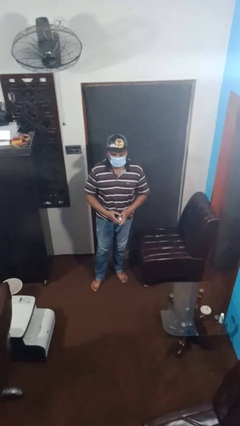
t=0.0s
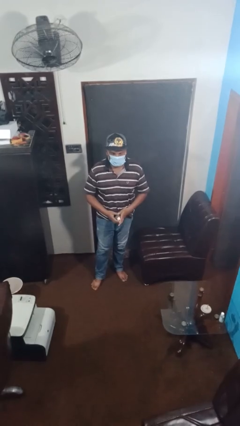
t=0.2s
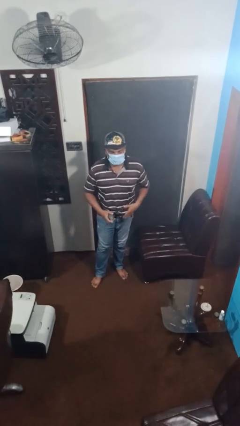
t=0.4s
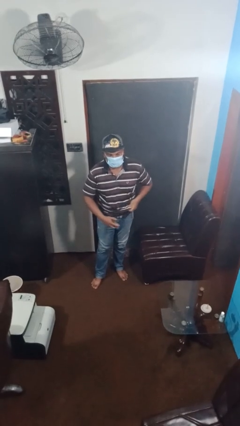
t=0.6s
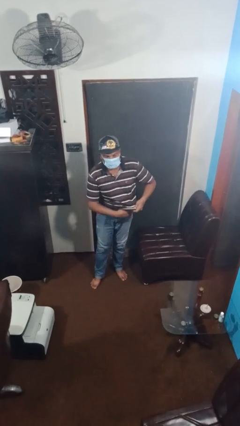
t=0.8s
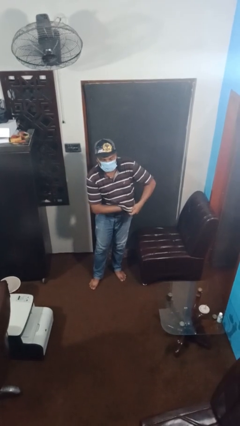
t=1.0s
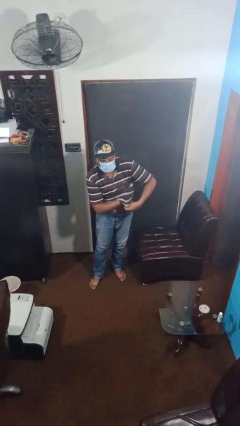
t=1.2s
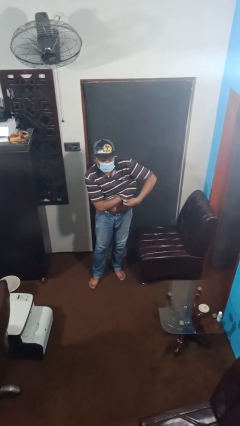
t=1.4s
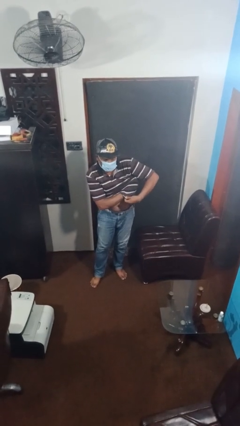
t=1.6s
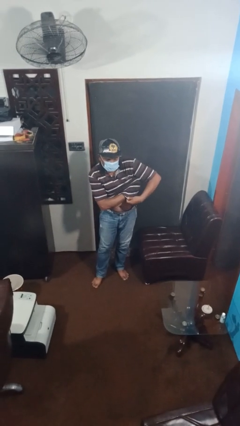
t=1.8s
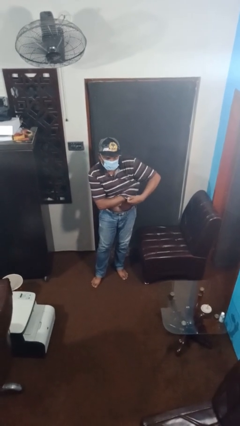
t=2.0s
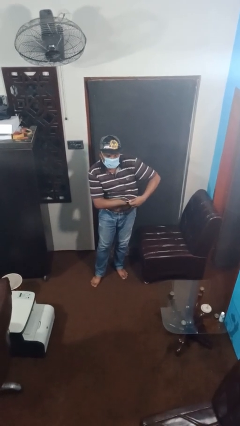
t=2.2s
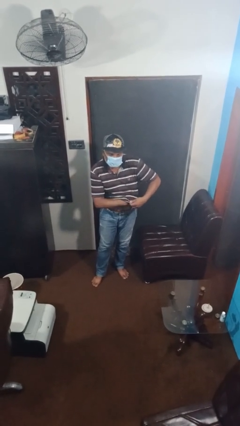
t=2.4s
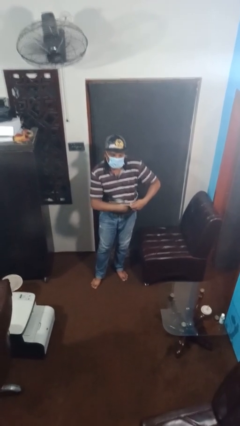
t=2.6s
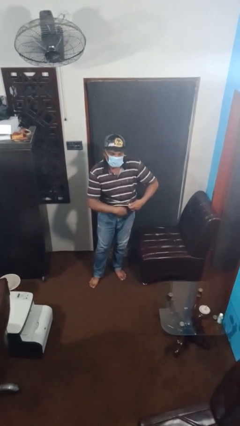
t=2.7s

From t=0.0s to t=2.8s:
person applies deodorant

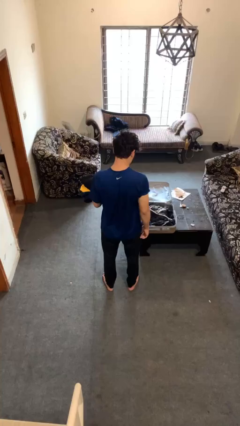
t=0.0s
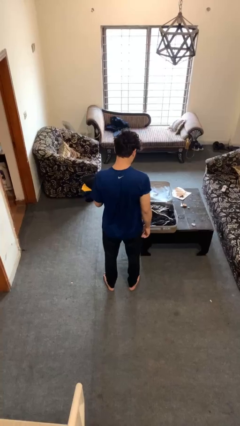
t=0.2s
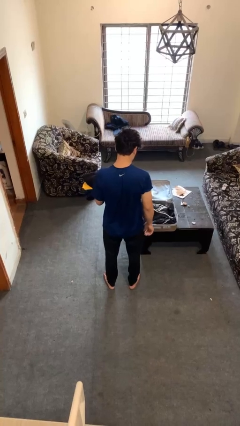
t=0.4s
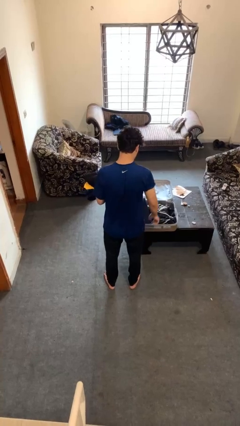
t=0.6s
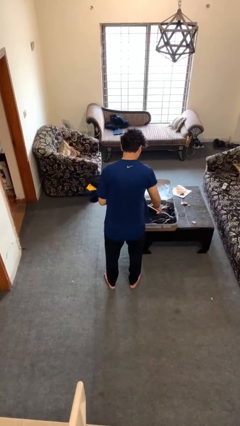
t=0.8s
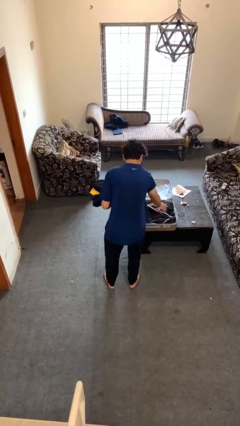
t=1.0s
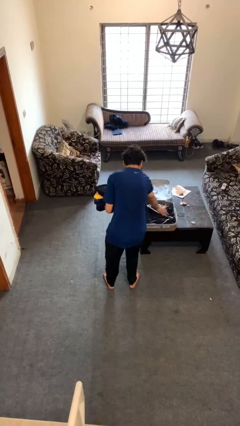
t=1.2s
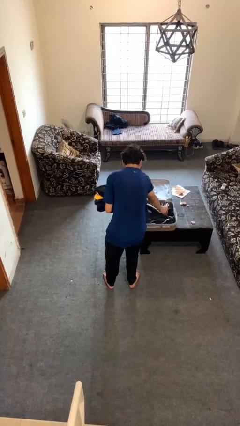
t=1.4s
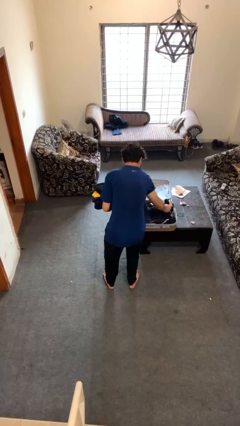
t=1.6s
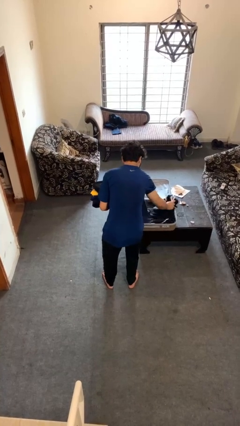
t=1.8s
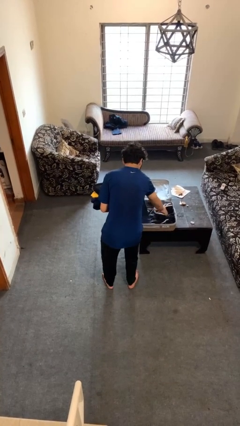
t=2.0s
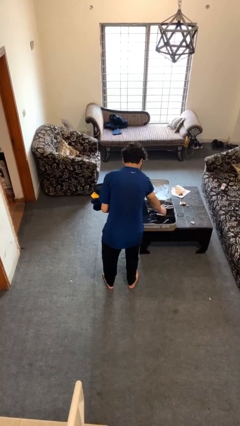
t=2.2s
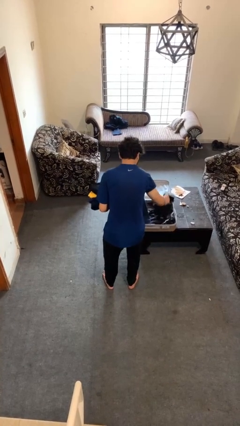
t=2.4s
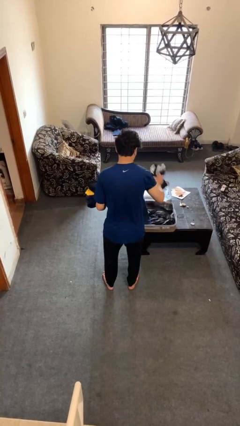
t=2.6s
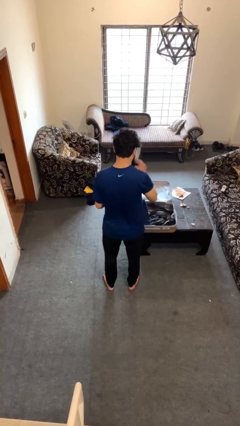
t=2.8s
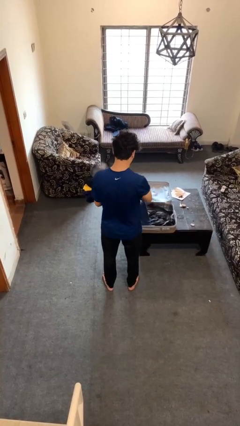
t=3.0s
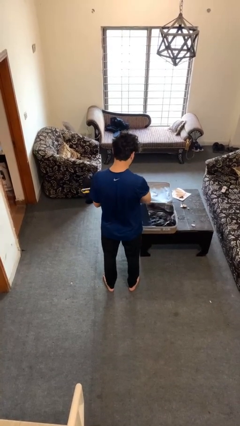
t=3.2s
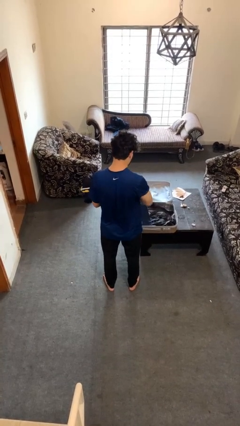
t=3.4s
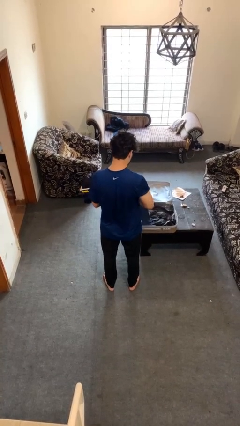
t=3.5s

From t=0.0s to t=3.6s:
person unloads clothes from suitcase

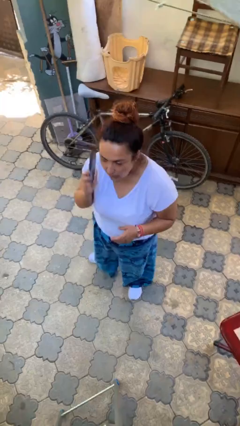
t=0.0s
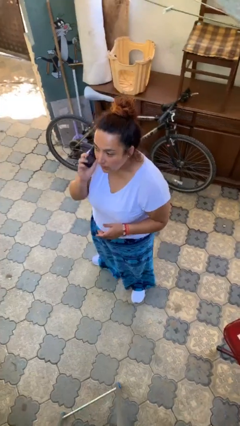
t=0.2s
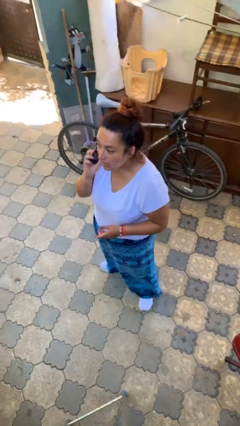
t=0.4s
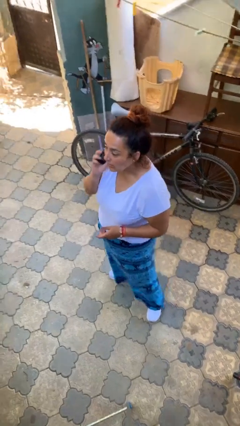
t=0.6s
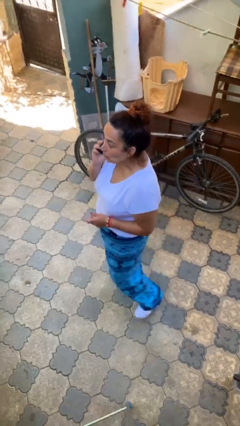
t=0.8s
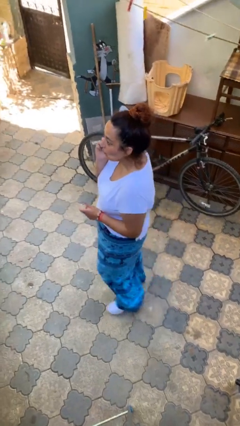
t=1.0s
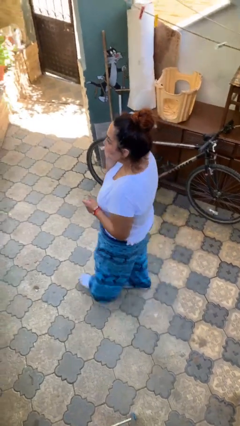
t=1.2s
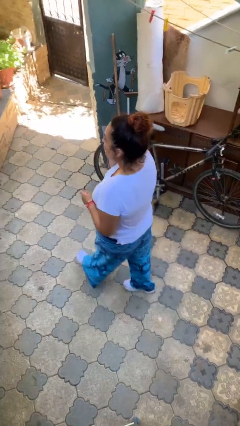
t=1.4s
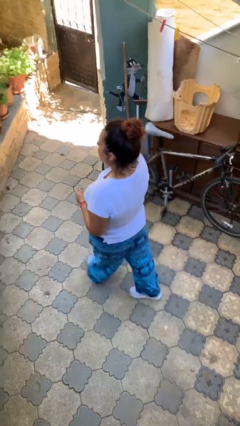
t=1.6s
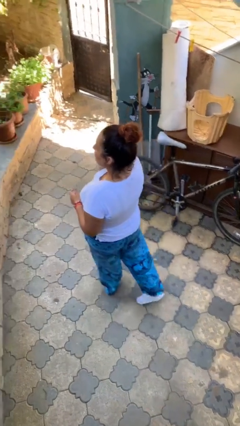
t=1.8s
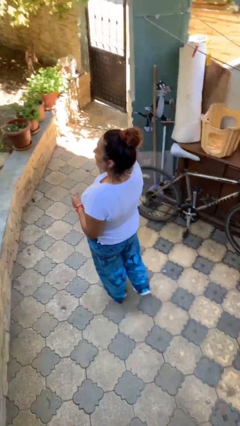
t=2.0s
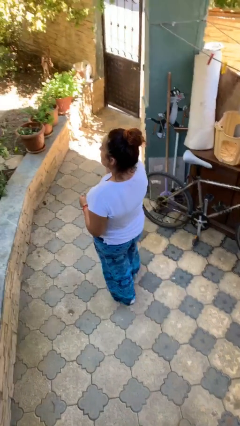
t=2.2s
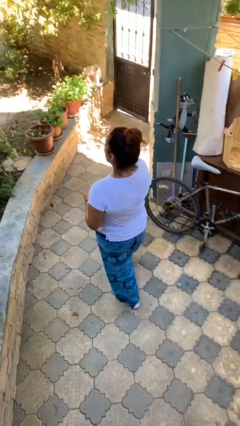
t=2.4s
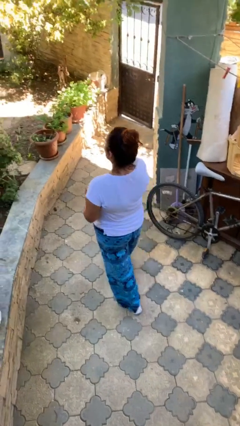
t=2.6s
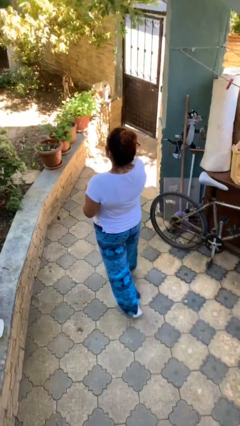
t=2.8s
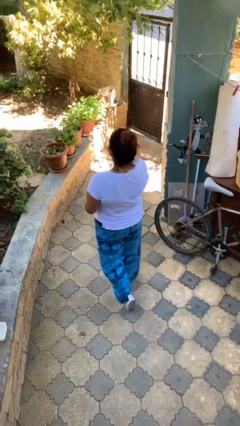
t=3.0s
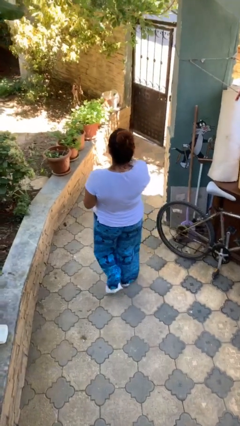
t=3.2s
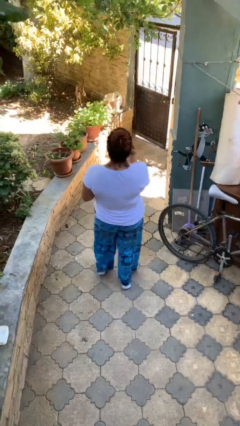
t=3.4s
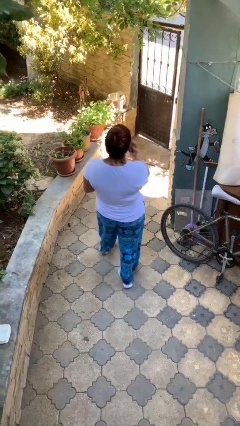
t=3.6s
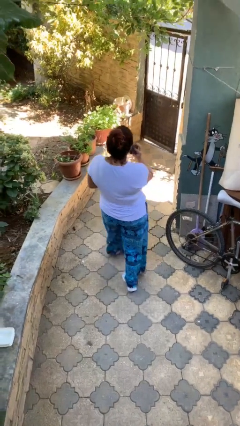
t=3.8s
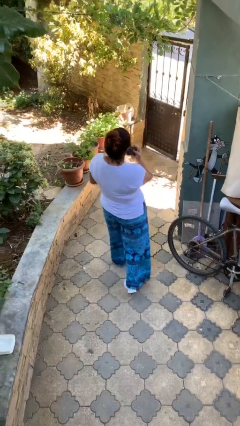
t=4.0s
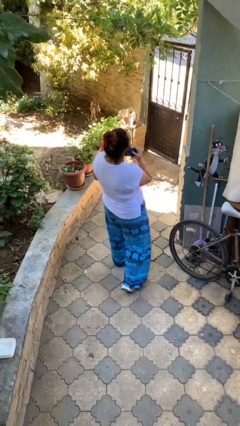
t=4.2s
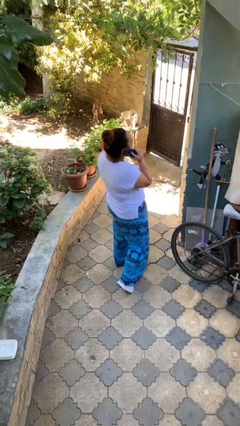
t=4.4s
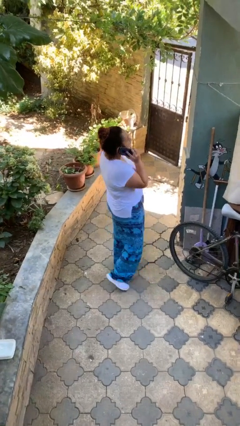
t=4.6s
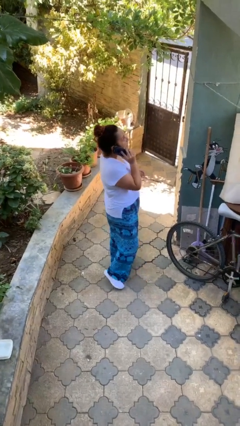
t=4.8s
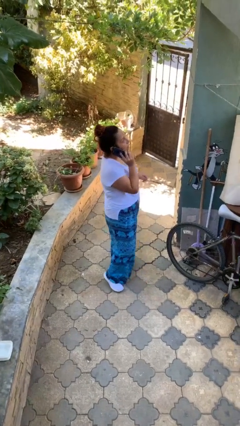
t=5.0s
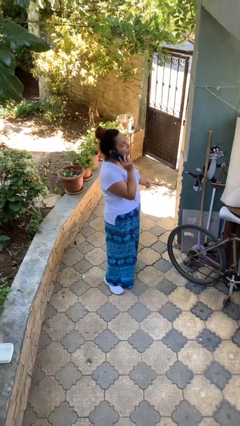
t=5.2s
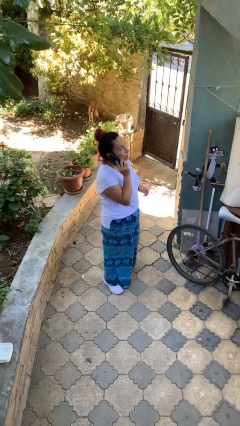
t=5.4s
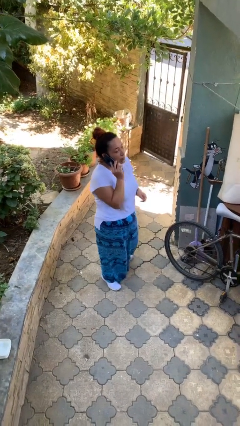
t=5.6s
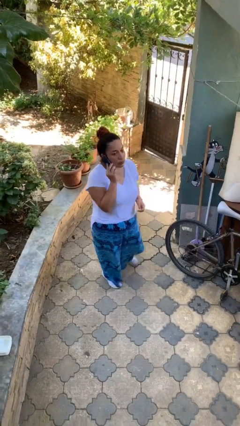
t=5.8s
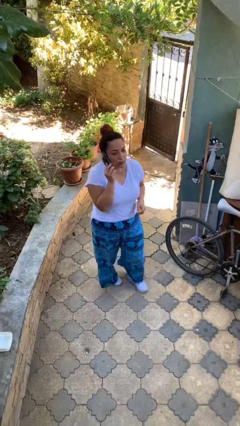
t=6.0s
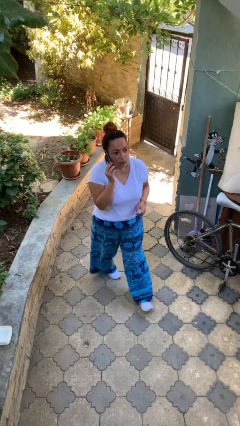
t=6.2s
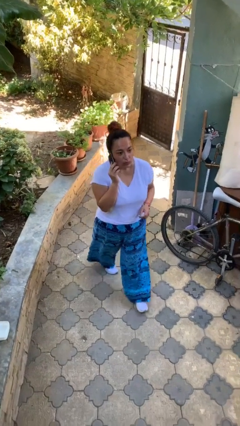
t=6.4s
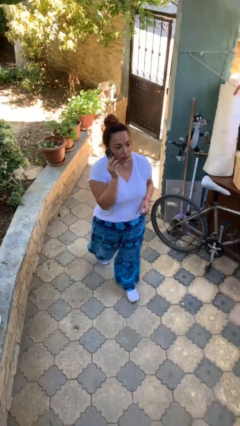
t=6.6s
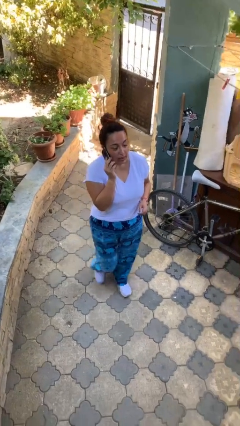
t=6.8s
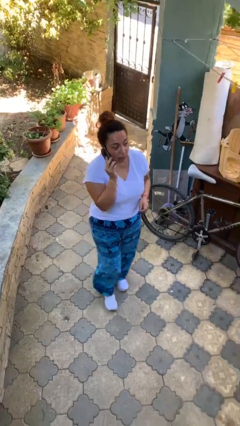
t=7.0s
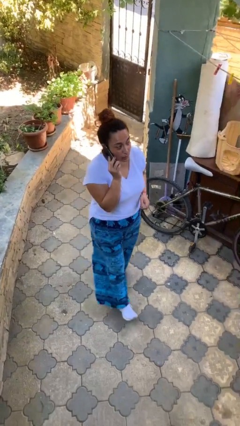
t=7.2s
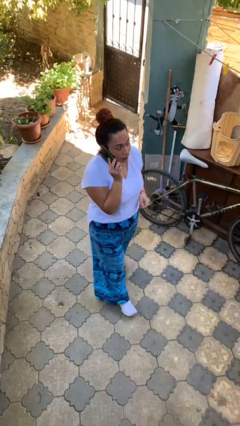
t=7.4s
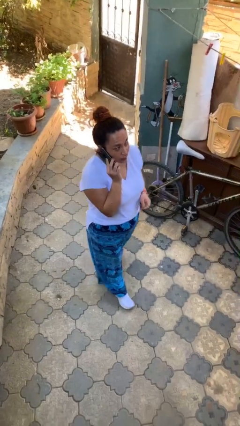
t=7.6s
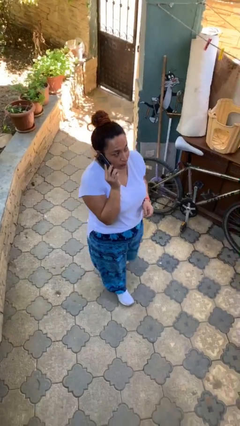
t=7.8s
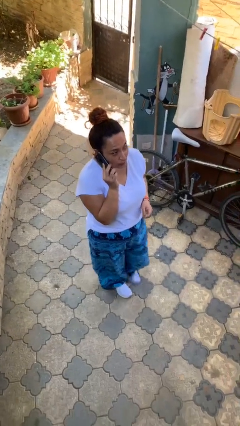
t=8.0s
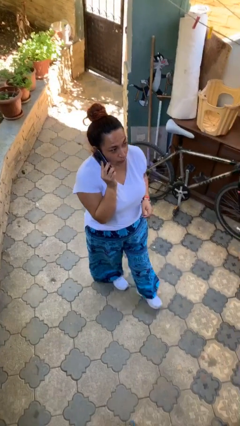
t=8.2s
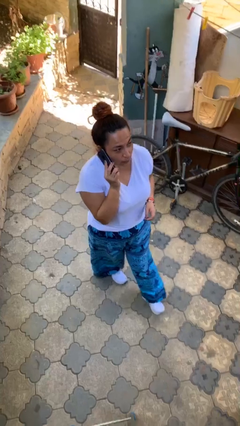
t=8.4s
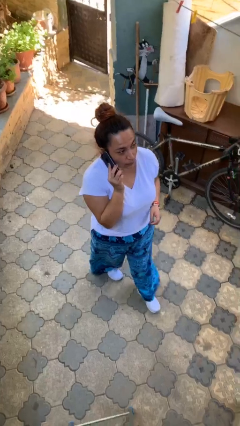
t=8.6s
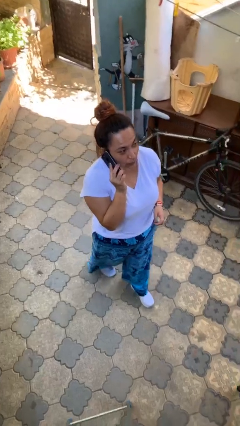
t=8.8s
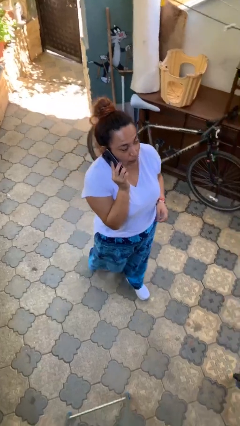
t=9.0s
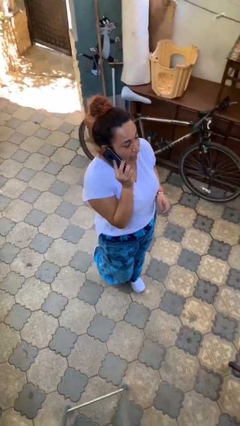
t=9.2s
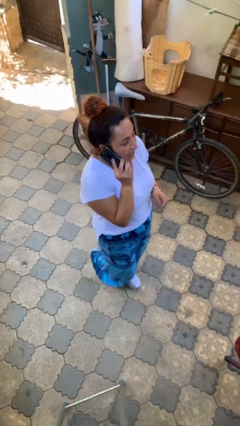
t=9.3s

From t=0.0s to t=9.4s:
person talks on phone

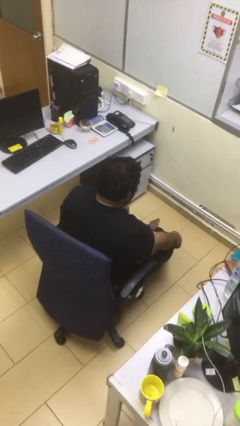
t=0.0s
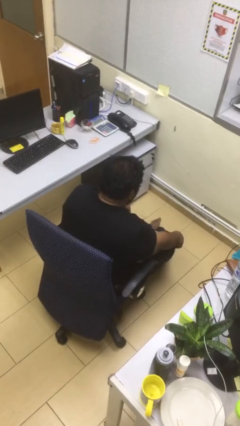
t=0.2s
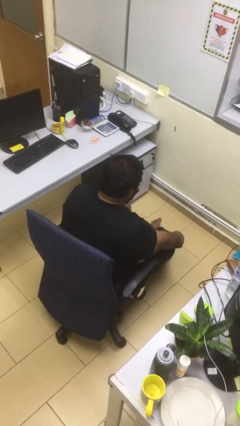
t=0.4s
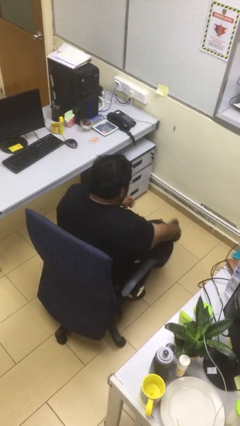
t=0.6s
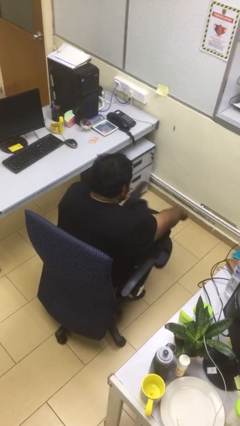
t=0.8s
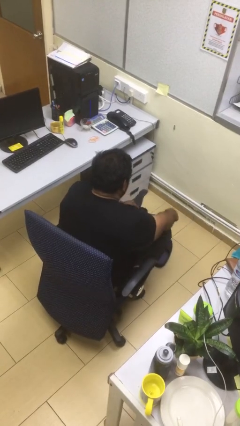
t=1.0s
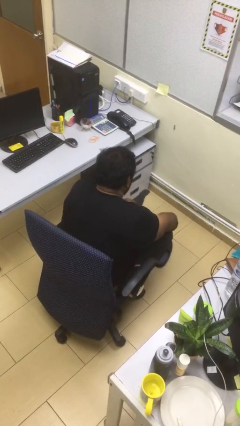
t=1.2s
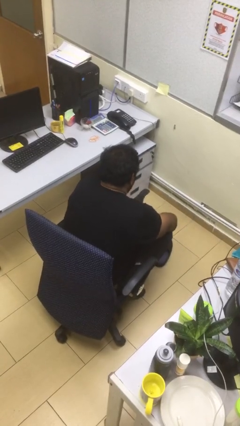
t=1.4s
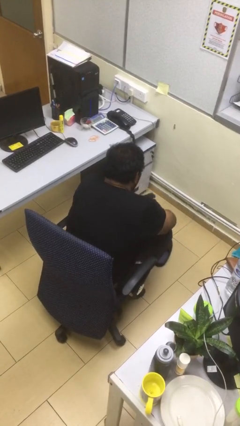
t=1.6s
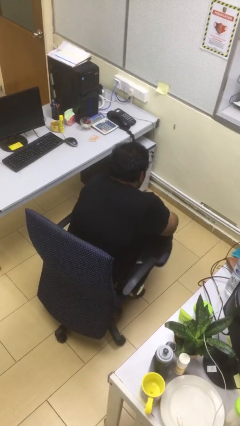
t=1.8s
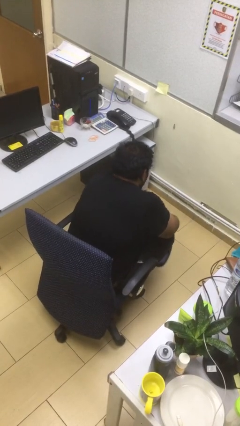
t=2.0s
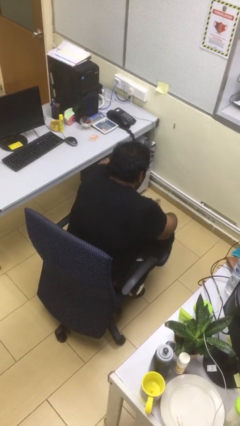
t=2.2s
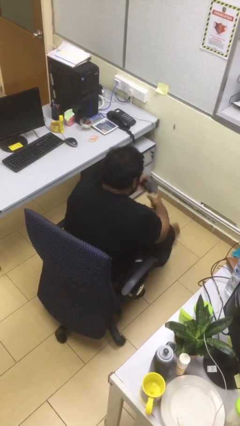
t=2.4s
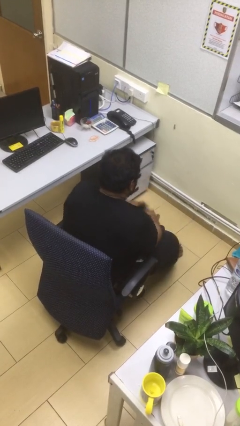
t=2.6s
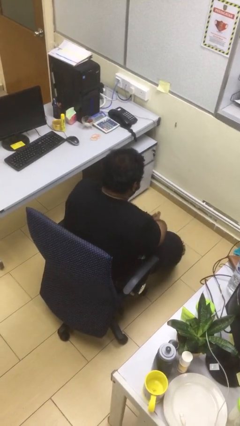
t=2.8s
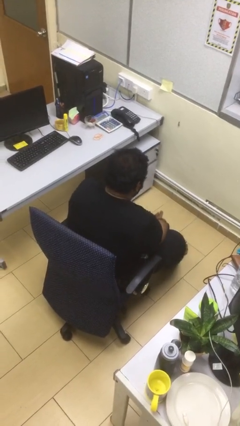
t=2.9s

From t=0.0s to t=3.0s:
person takes off socks
